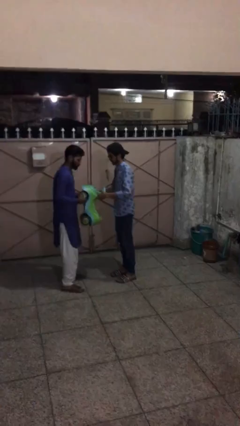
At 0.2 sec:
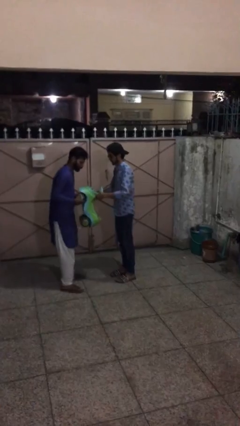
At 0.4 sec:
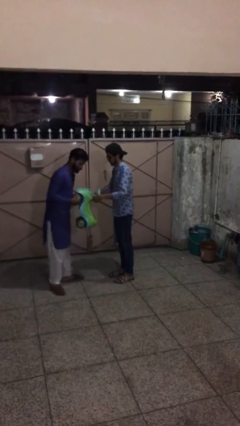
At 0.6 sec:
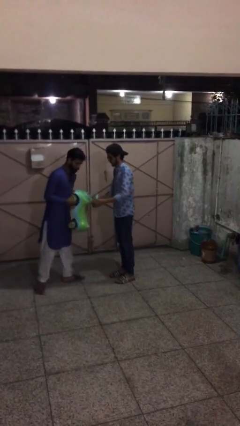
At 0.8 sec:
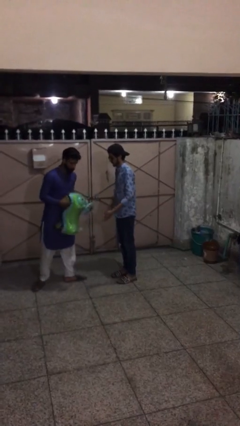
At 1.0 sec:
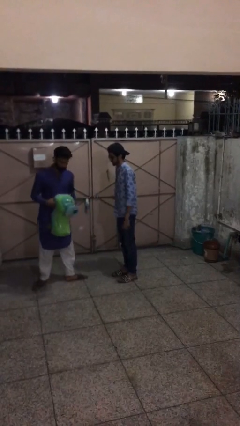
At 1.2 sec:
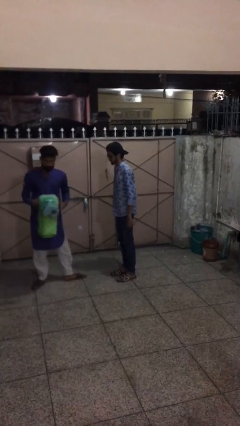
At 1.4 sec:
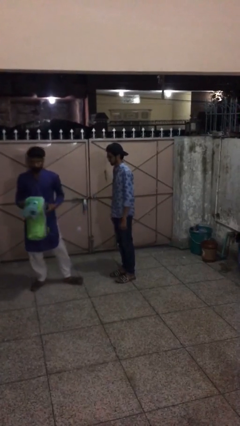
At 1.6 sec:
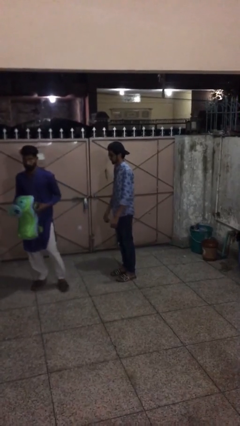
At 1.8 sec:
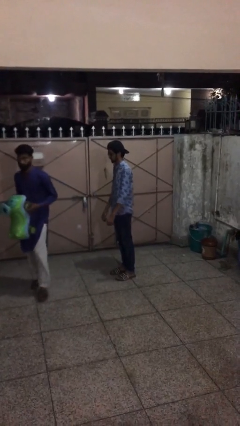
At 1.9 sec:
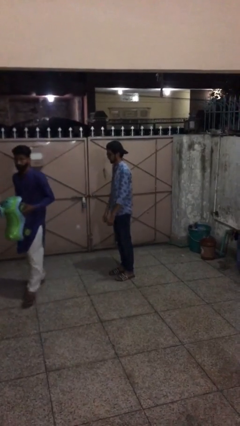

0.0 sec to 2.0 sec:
person transfers object to person

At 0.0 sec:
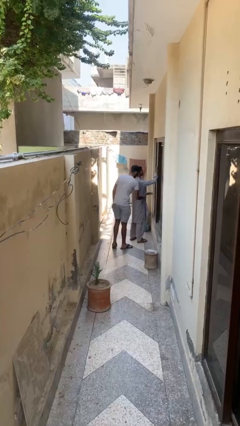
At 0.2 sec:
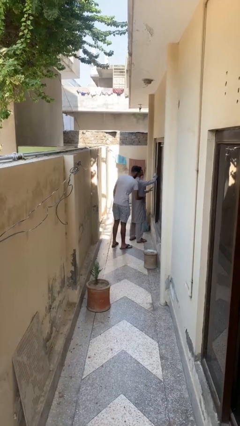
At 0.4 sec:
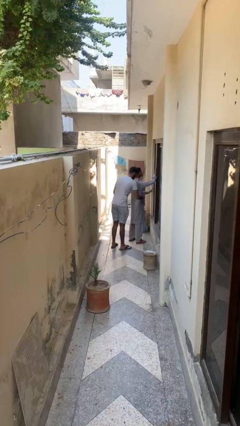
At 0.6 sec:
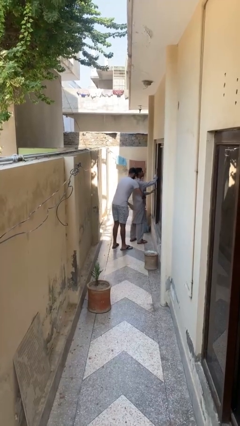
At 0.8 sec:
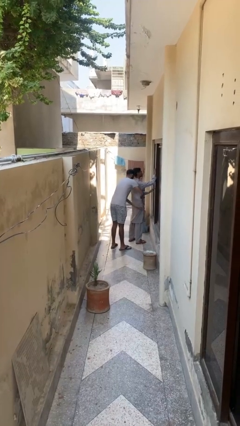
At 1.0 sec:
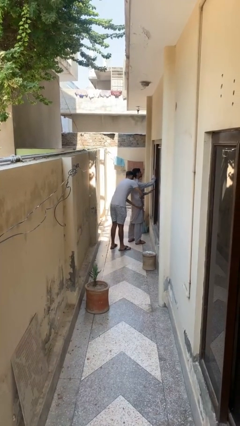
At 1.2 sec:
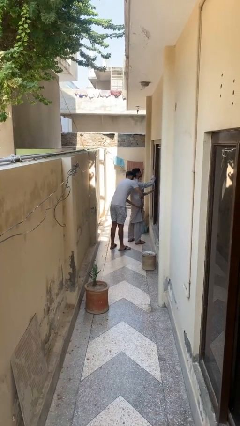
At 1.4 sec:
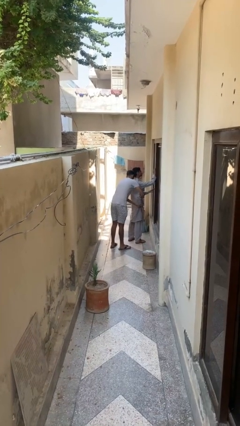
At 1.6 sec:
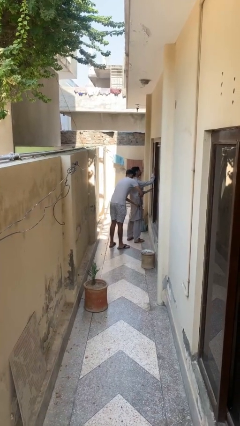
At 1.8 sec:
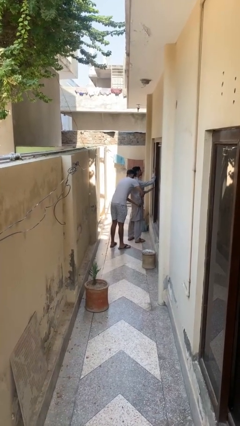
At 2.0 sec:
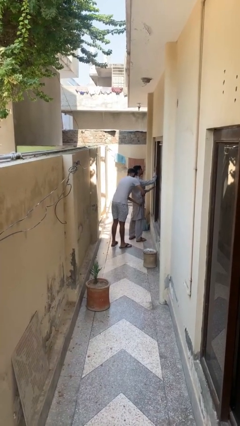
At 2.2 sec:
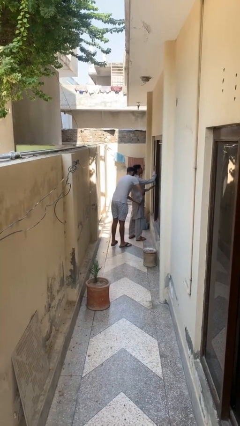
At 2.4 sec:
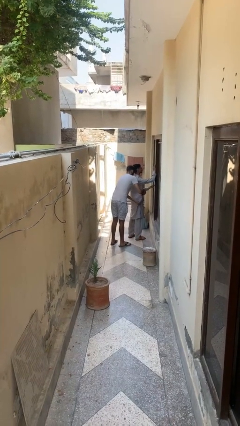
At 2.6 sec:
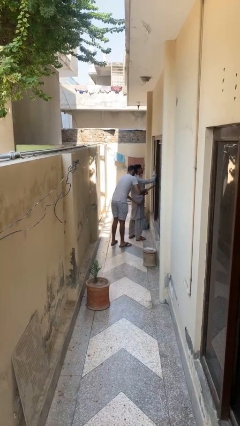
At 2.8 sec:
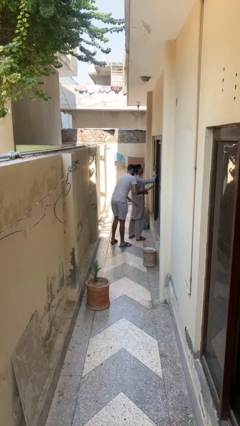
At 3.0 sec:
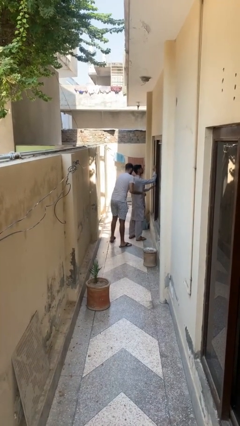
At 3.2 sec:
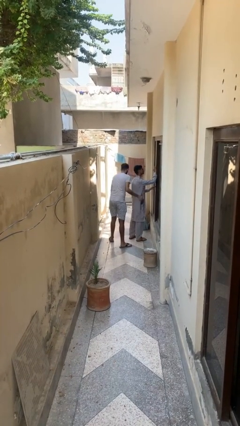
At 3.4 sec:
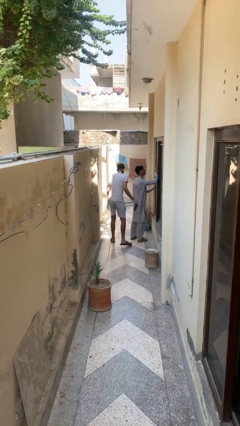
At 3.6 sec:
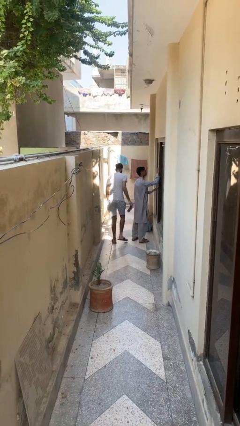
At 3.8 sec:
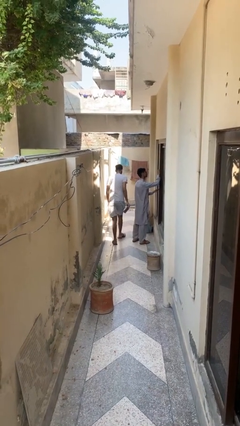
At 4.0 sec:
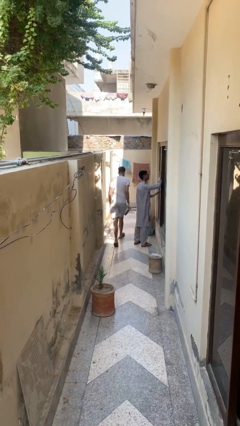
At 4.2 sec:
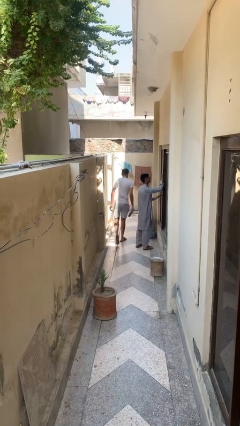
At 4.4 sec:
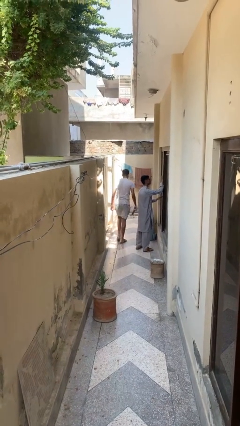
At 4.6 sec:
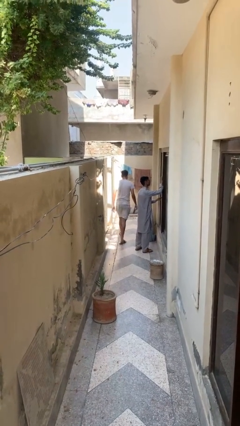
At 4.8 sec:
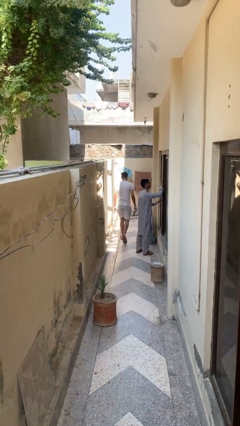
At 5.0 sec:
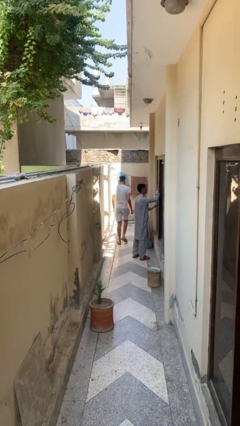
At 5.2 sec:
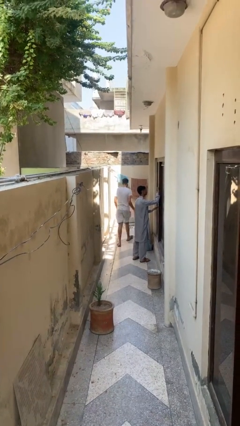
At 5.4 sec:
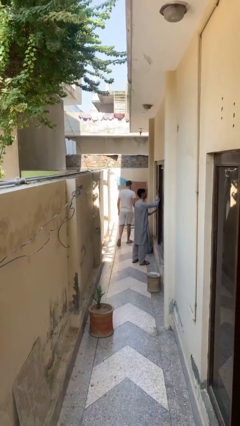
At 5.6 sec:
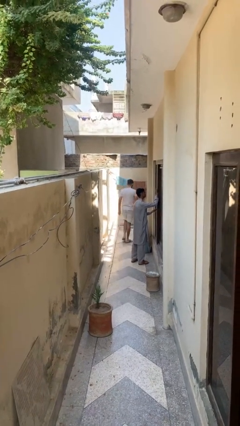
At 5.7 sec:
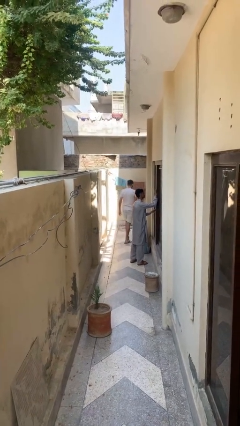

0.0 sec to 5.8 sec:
person steals object from person

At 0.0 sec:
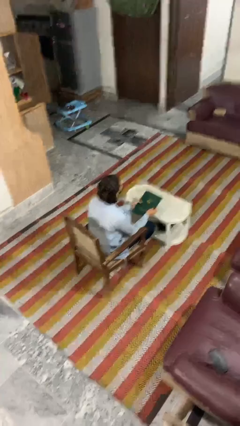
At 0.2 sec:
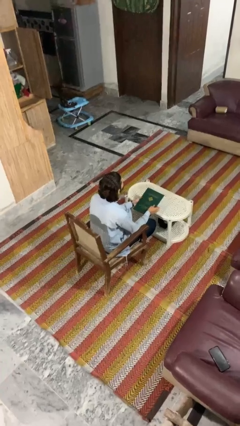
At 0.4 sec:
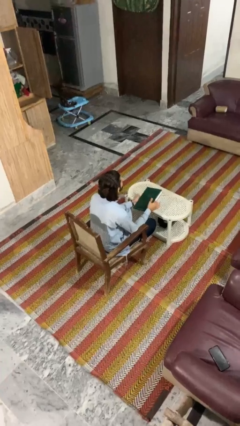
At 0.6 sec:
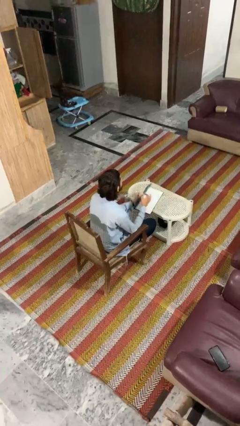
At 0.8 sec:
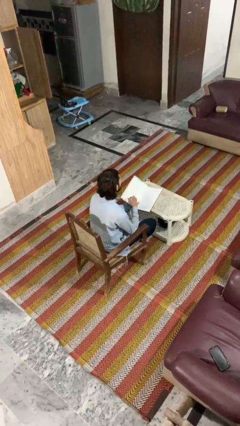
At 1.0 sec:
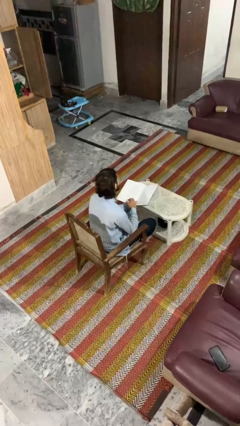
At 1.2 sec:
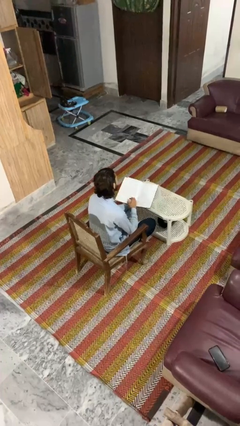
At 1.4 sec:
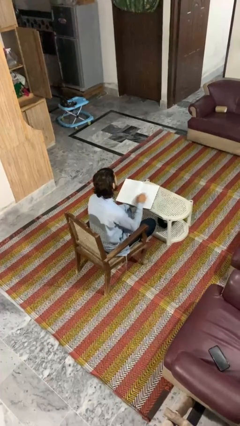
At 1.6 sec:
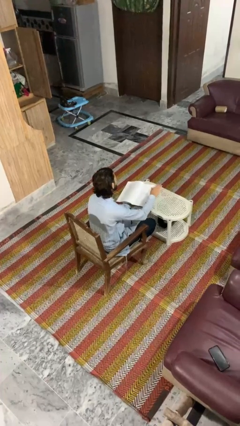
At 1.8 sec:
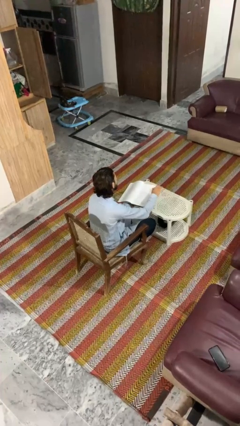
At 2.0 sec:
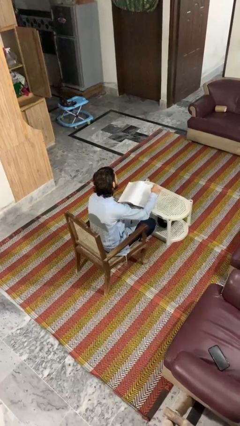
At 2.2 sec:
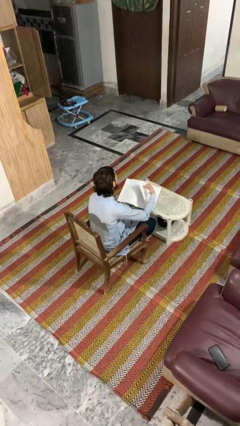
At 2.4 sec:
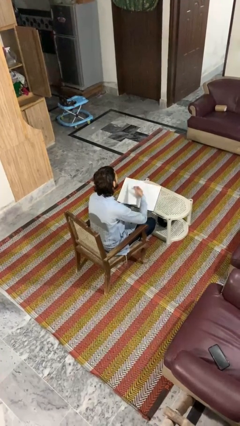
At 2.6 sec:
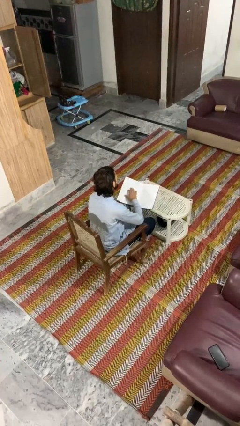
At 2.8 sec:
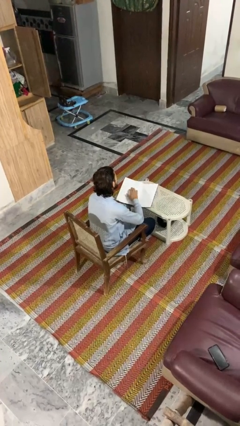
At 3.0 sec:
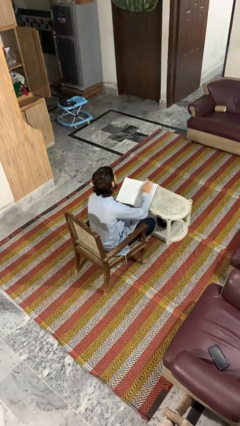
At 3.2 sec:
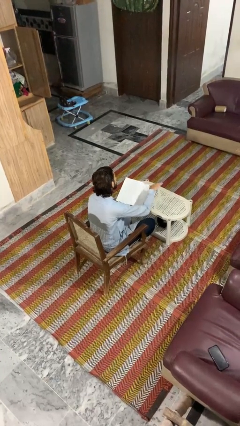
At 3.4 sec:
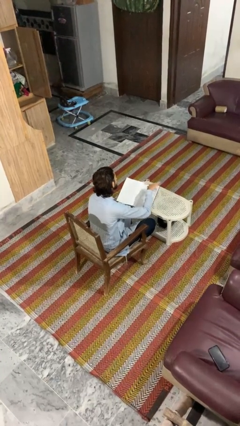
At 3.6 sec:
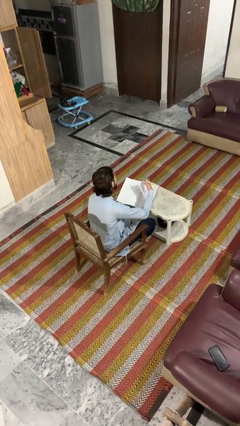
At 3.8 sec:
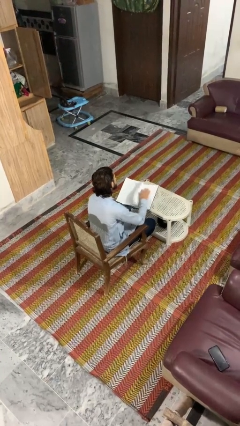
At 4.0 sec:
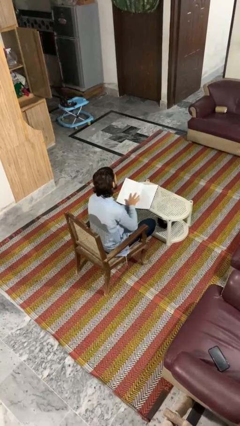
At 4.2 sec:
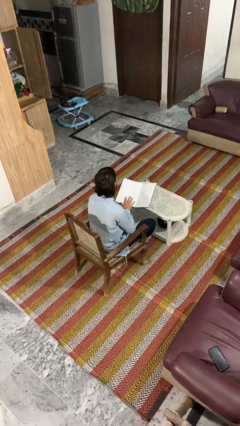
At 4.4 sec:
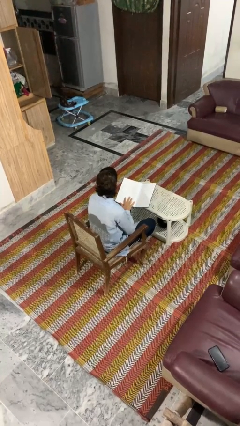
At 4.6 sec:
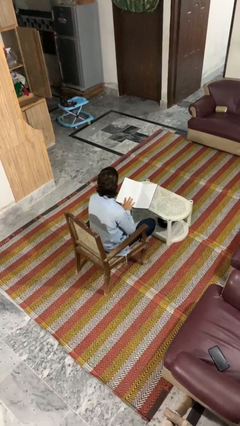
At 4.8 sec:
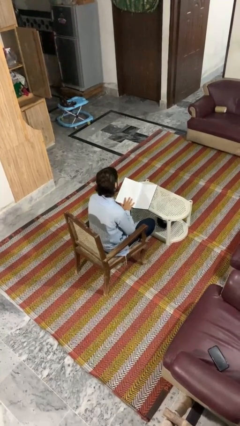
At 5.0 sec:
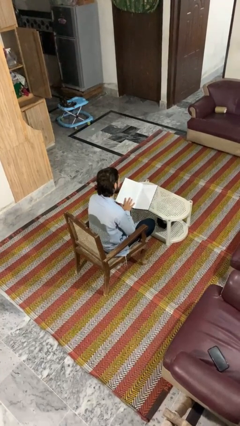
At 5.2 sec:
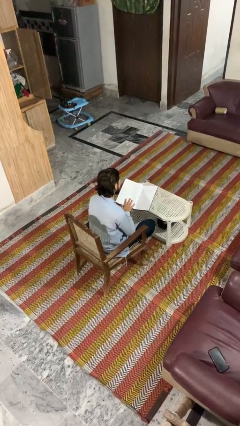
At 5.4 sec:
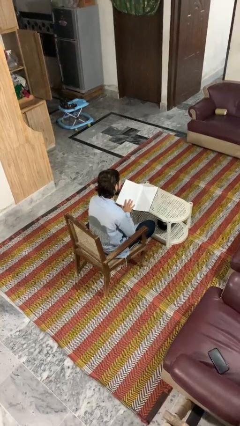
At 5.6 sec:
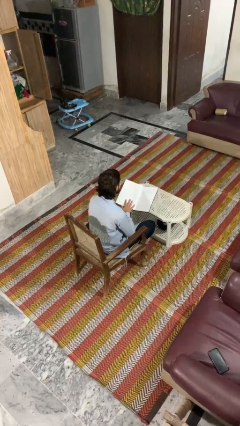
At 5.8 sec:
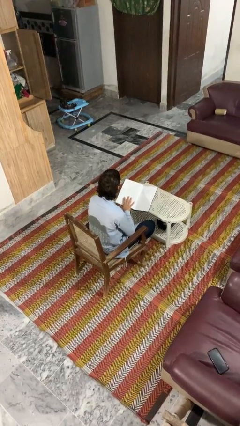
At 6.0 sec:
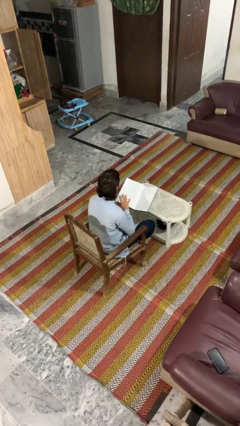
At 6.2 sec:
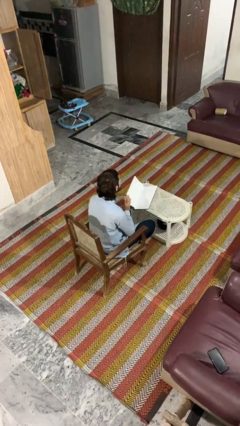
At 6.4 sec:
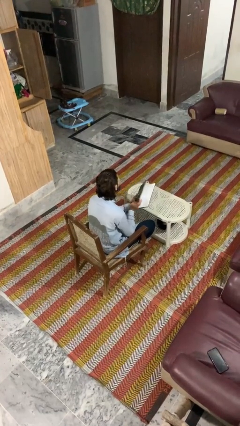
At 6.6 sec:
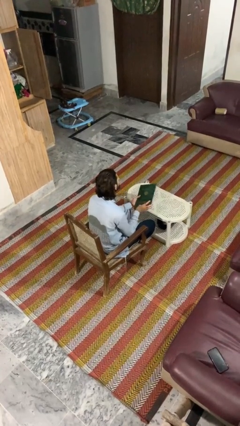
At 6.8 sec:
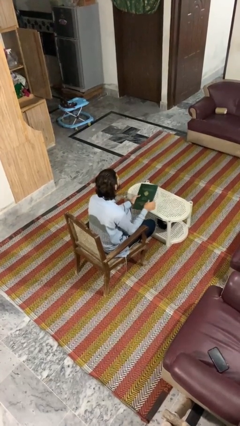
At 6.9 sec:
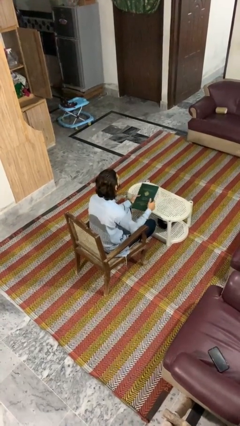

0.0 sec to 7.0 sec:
person reads book

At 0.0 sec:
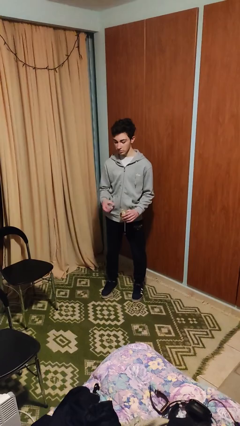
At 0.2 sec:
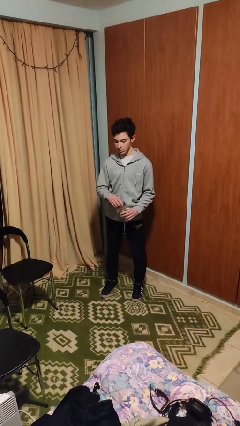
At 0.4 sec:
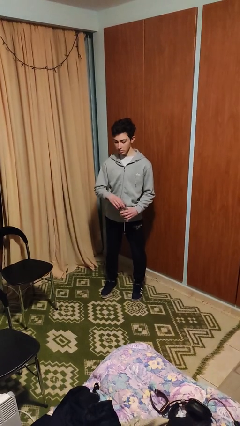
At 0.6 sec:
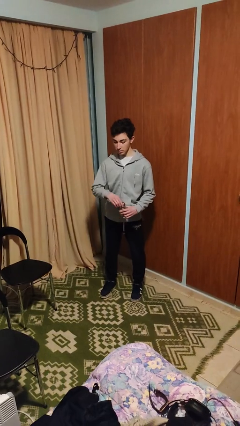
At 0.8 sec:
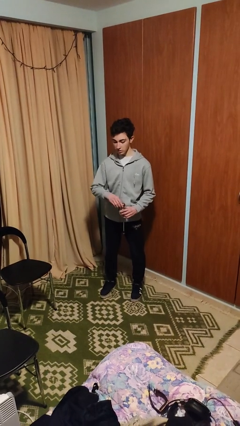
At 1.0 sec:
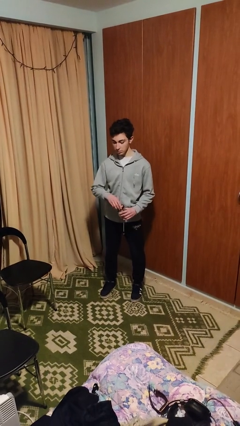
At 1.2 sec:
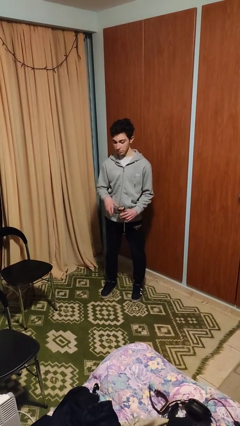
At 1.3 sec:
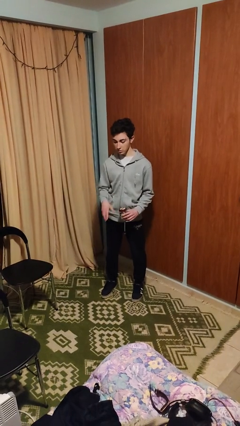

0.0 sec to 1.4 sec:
person closes jar

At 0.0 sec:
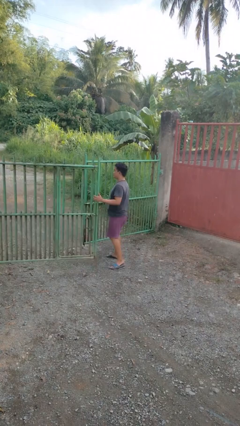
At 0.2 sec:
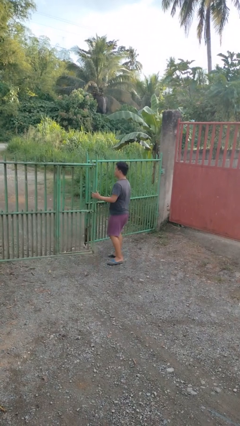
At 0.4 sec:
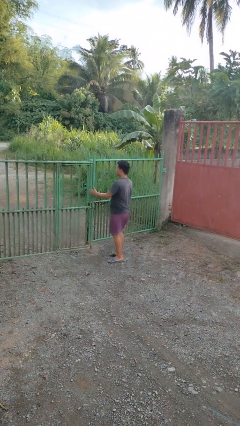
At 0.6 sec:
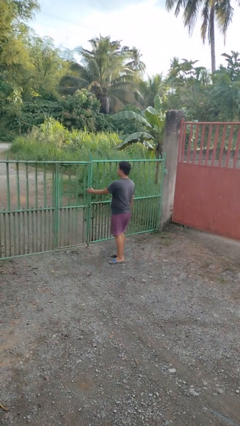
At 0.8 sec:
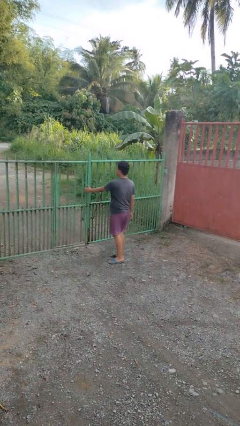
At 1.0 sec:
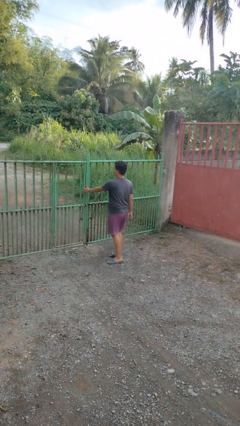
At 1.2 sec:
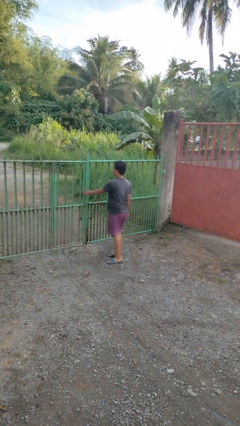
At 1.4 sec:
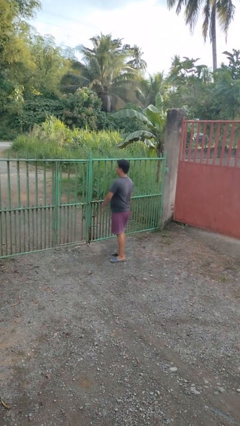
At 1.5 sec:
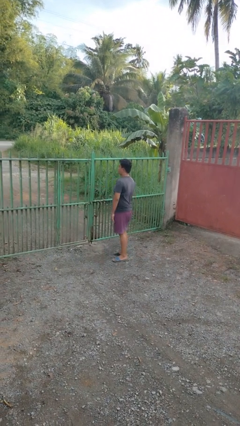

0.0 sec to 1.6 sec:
person closes gate
